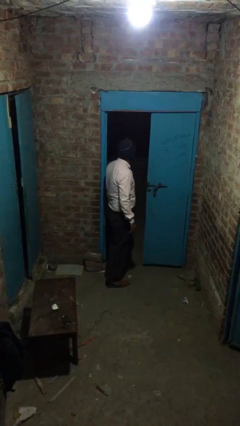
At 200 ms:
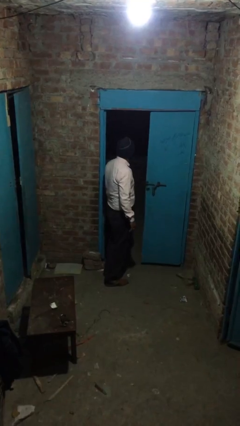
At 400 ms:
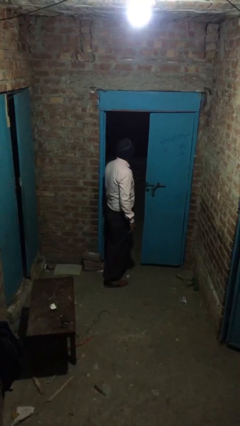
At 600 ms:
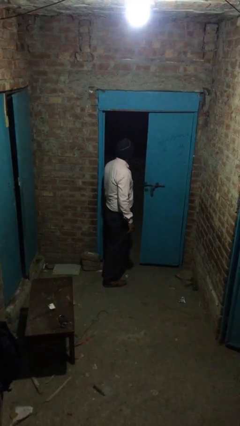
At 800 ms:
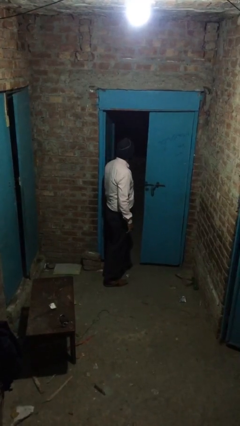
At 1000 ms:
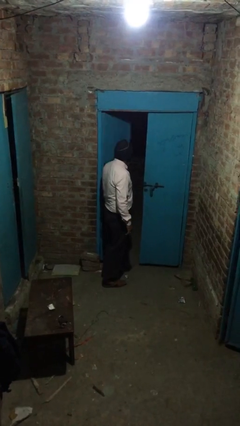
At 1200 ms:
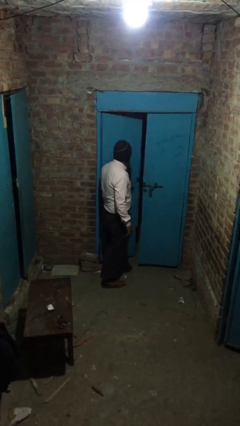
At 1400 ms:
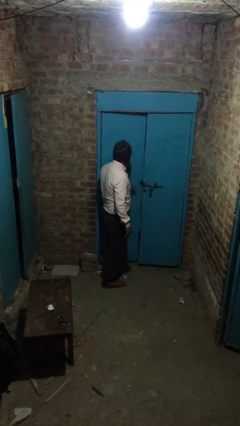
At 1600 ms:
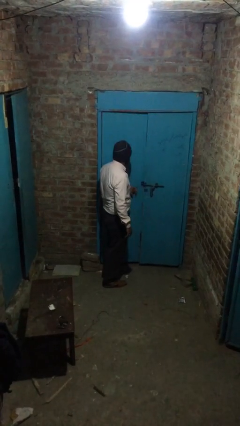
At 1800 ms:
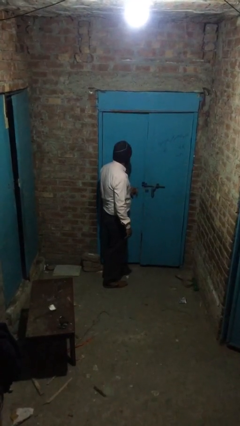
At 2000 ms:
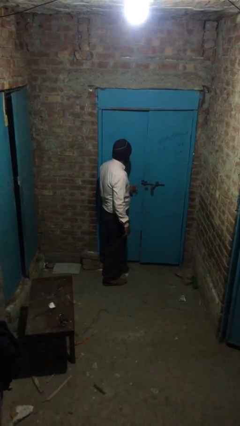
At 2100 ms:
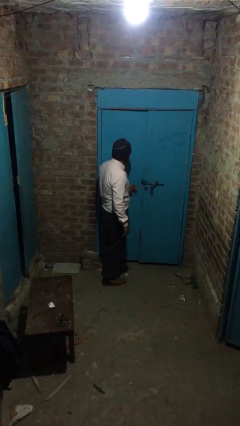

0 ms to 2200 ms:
person closes facility door

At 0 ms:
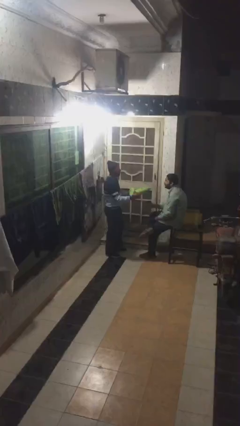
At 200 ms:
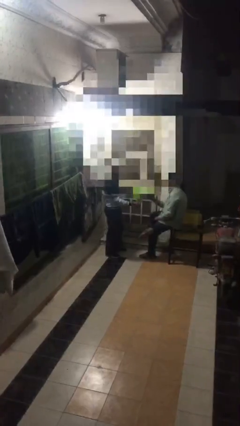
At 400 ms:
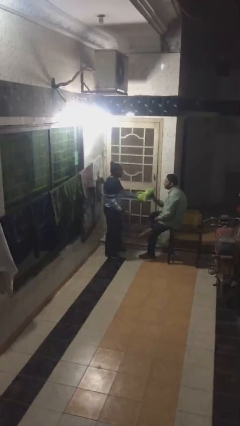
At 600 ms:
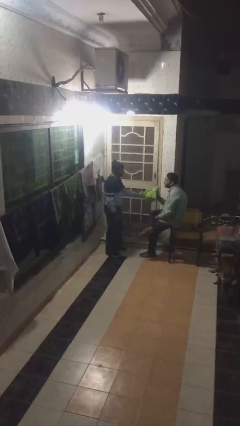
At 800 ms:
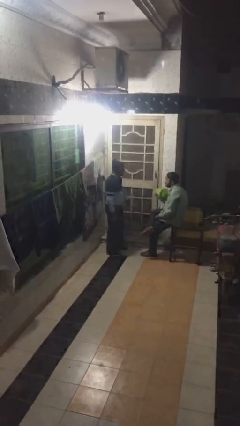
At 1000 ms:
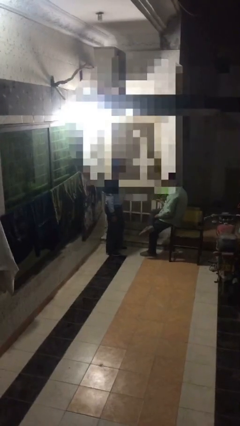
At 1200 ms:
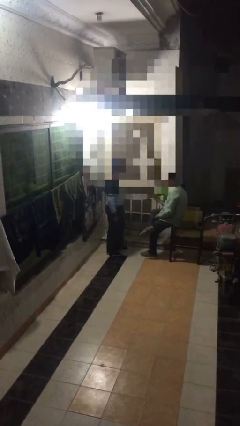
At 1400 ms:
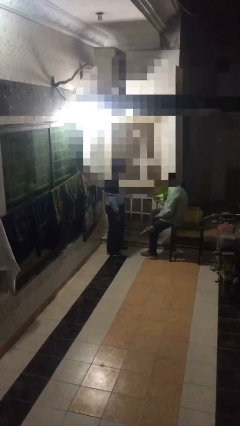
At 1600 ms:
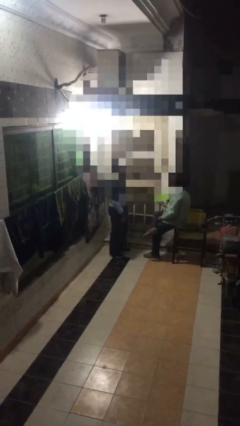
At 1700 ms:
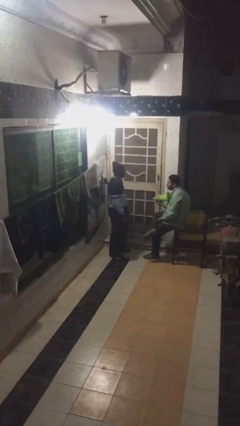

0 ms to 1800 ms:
person transfers object to person

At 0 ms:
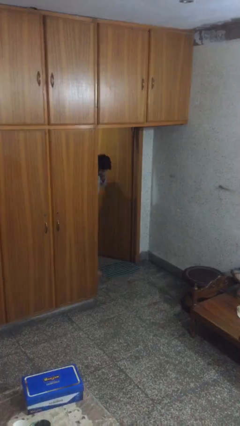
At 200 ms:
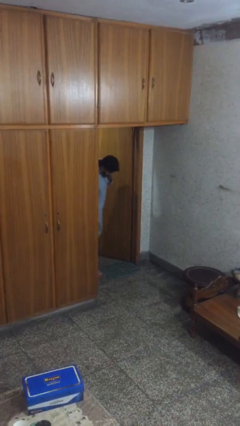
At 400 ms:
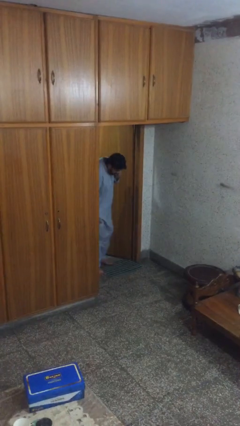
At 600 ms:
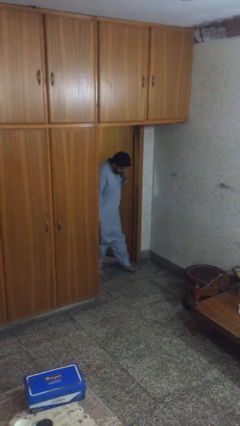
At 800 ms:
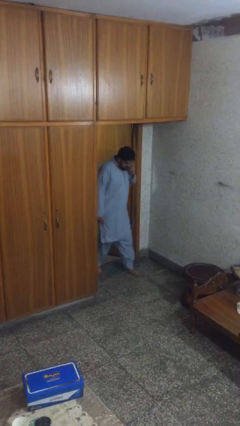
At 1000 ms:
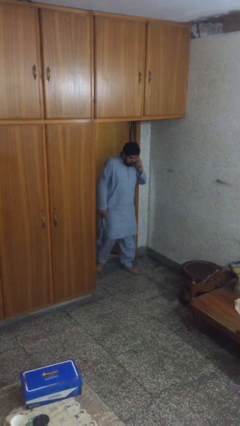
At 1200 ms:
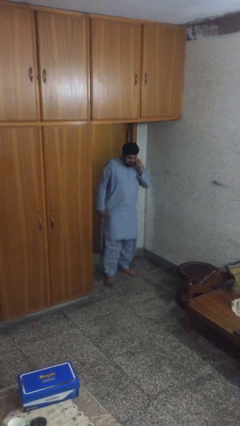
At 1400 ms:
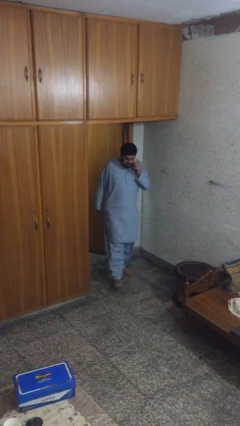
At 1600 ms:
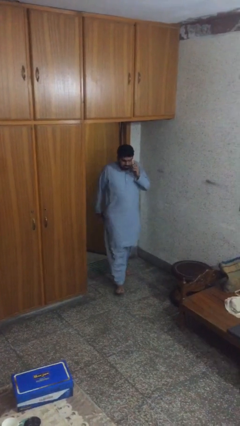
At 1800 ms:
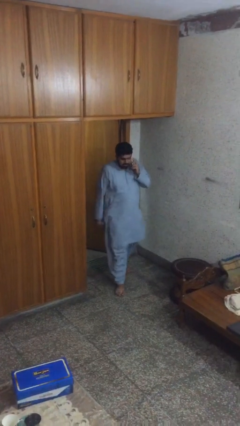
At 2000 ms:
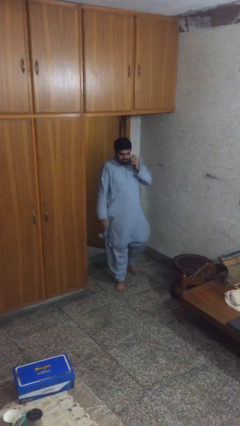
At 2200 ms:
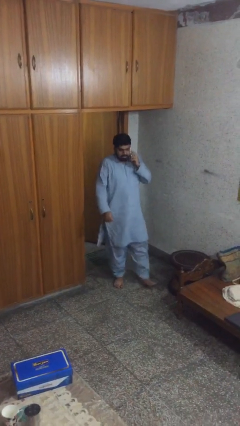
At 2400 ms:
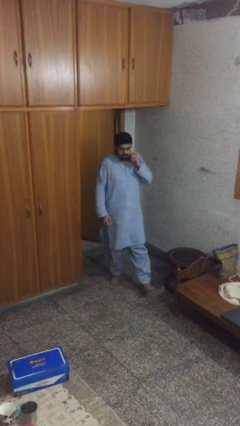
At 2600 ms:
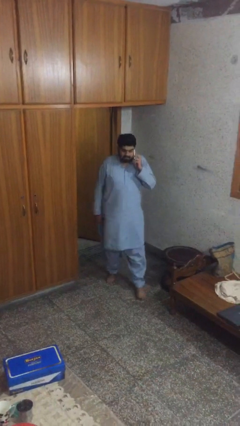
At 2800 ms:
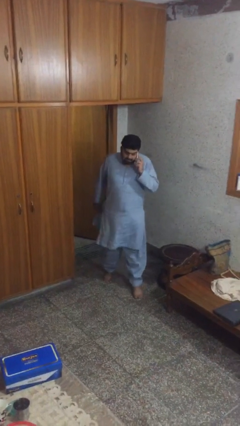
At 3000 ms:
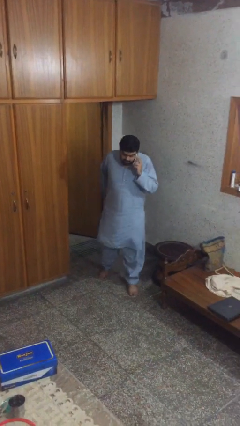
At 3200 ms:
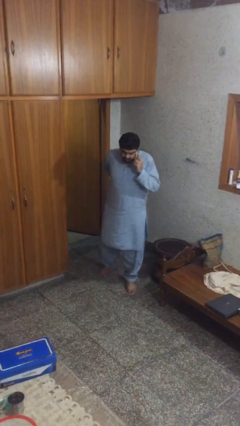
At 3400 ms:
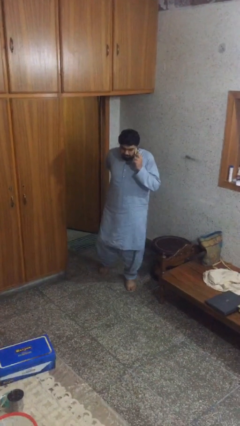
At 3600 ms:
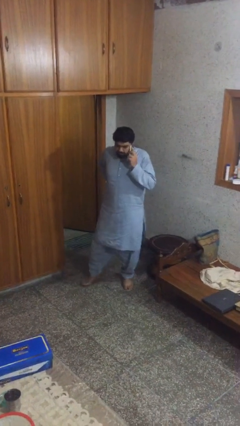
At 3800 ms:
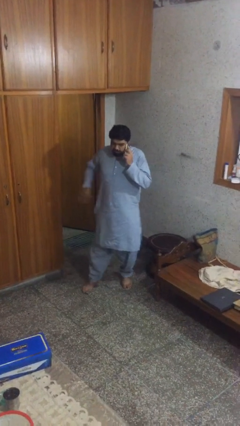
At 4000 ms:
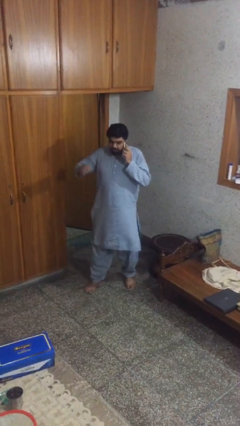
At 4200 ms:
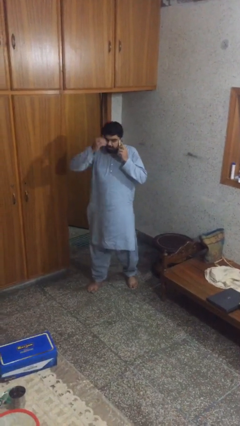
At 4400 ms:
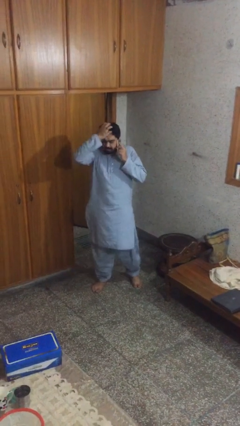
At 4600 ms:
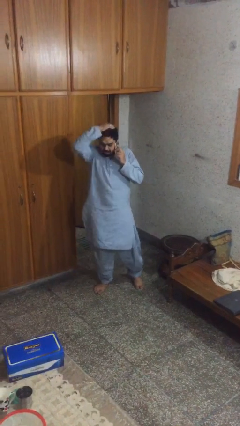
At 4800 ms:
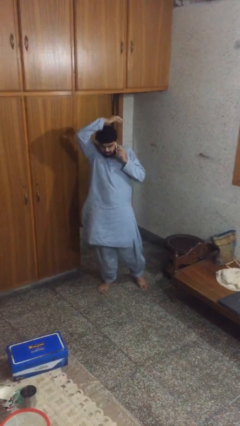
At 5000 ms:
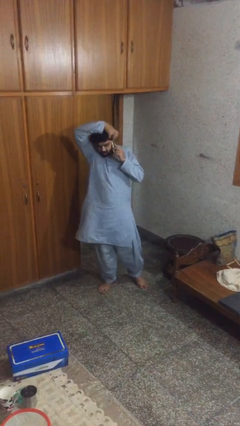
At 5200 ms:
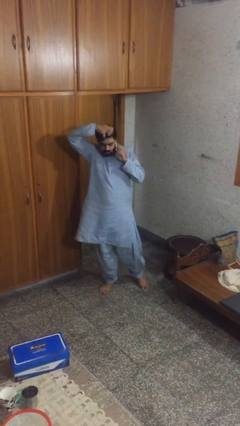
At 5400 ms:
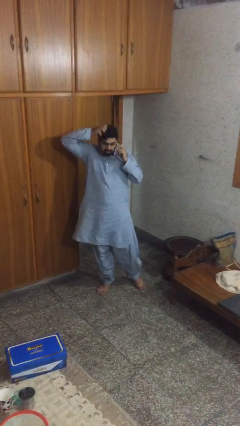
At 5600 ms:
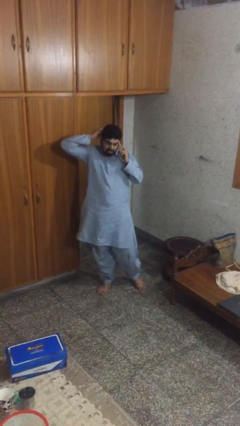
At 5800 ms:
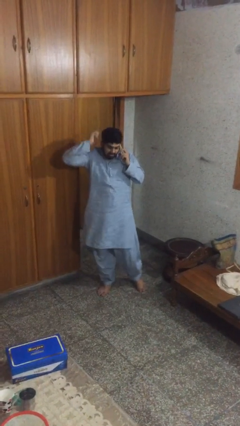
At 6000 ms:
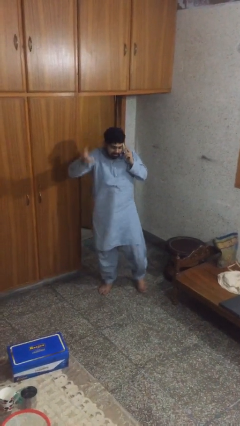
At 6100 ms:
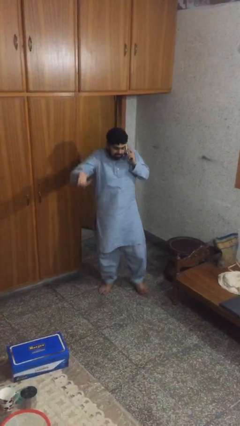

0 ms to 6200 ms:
person enters scene through structure

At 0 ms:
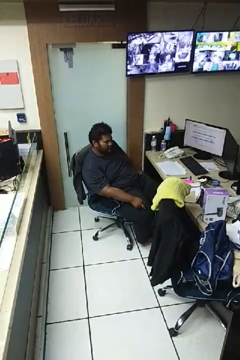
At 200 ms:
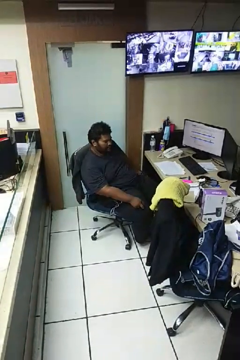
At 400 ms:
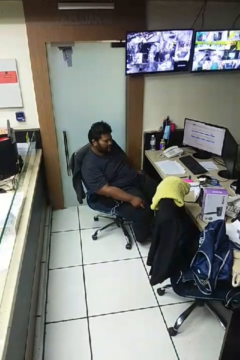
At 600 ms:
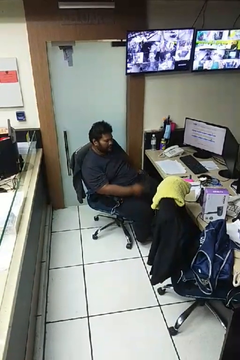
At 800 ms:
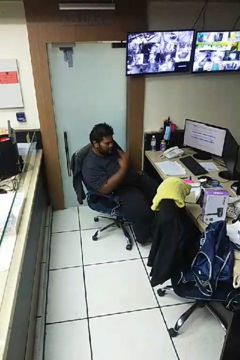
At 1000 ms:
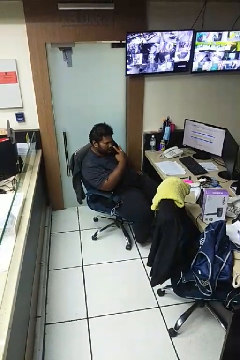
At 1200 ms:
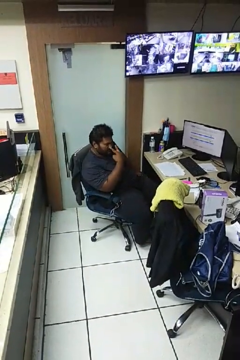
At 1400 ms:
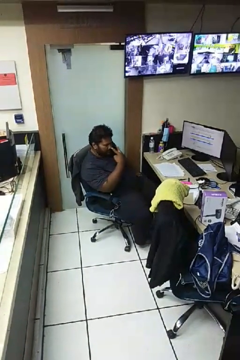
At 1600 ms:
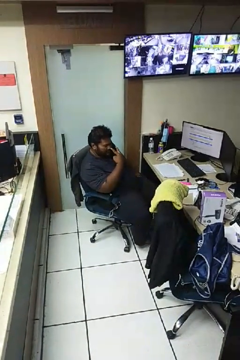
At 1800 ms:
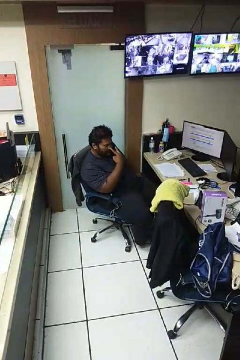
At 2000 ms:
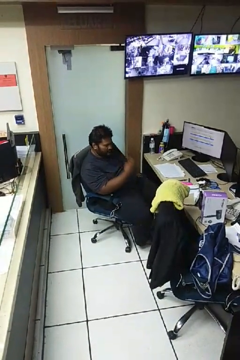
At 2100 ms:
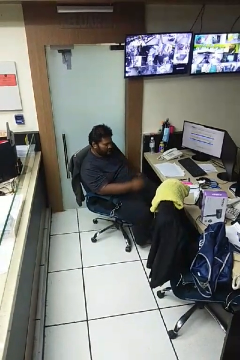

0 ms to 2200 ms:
person gestures watch closely

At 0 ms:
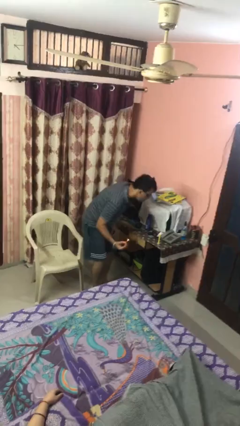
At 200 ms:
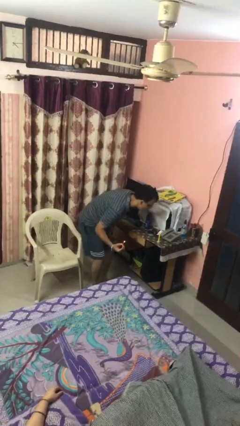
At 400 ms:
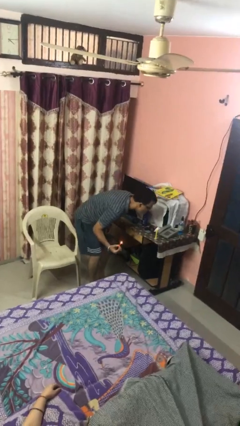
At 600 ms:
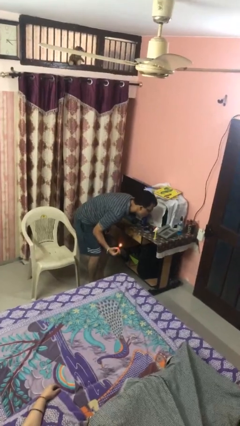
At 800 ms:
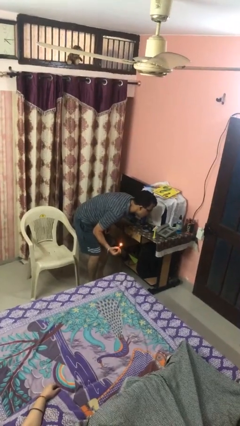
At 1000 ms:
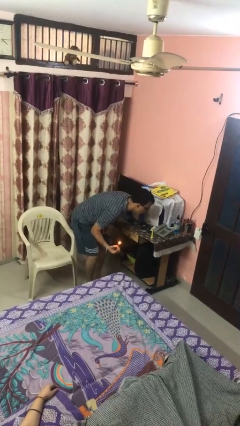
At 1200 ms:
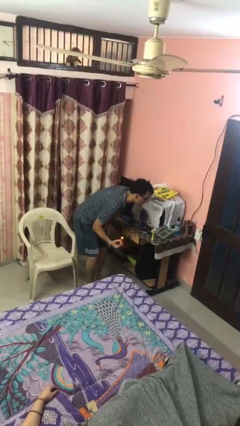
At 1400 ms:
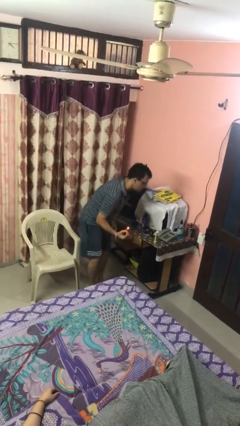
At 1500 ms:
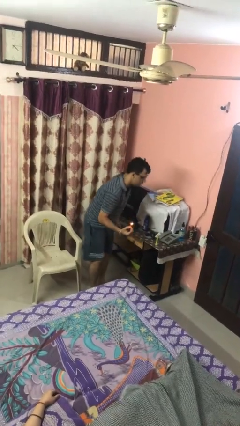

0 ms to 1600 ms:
person extinguishes candle

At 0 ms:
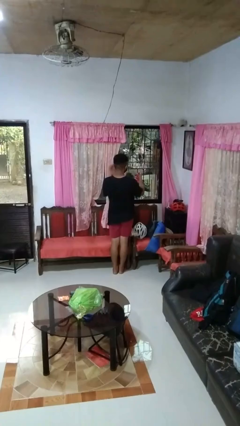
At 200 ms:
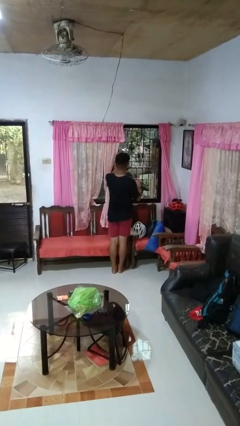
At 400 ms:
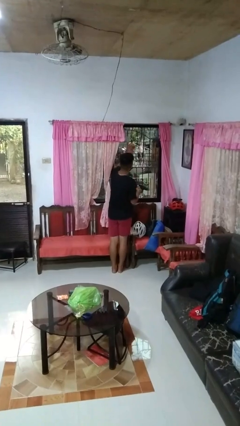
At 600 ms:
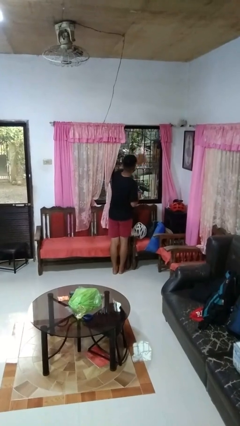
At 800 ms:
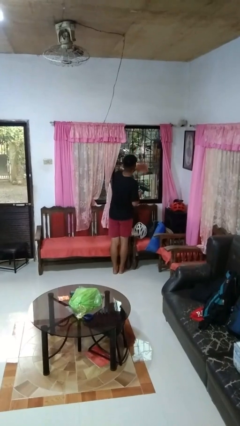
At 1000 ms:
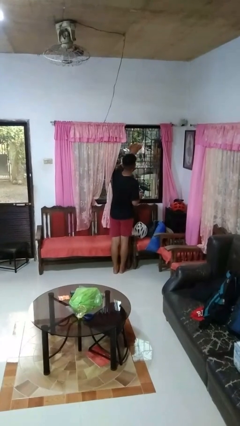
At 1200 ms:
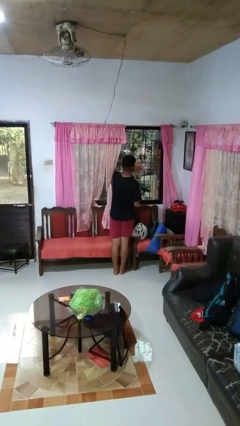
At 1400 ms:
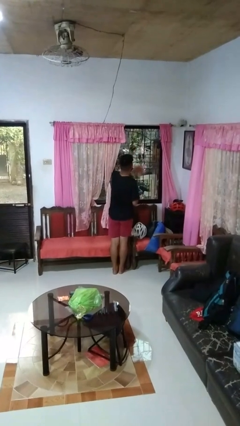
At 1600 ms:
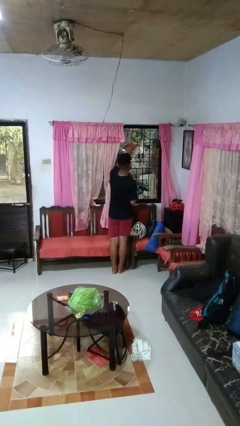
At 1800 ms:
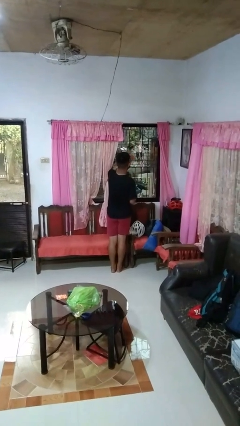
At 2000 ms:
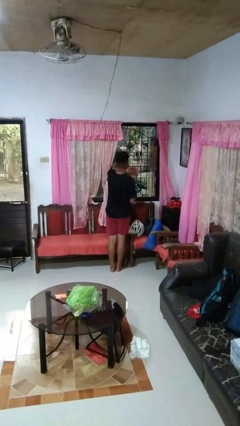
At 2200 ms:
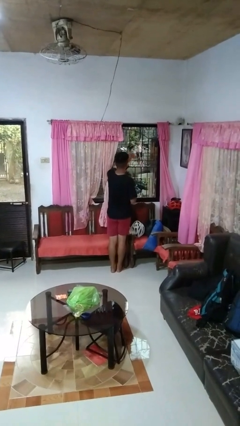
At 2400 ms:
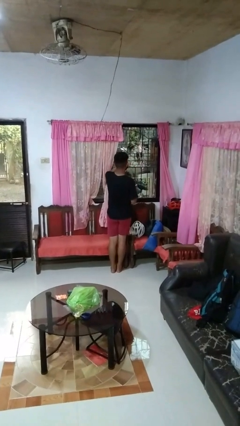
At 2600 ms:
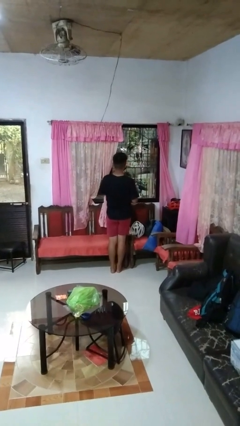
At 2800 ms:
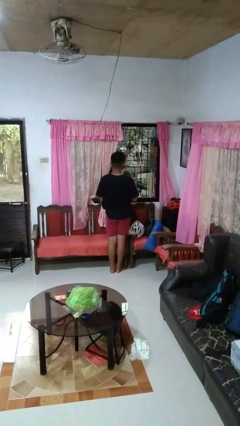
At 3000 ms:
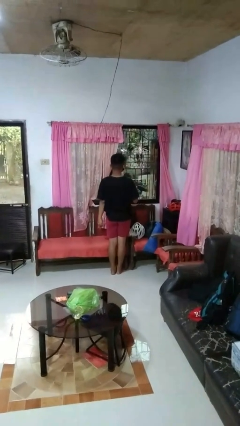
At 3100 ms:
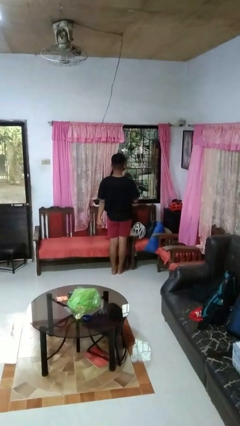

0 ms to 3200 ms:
person washes window

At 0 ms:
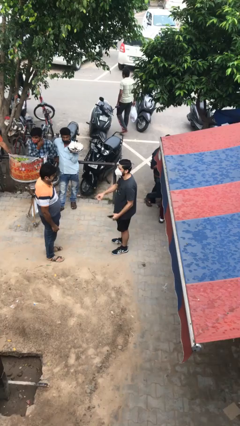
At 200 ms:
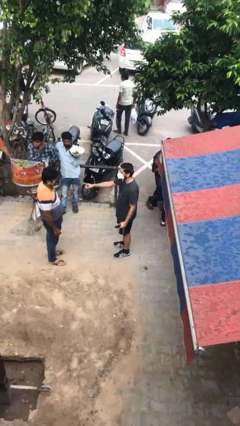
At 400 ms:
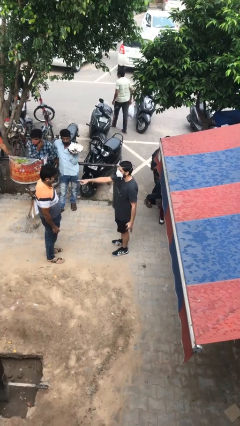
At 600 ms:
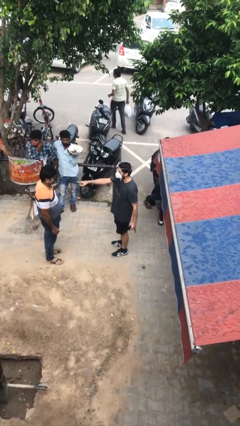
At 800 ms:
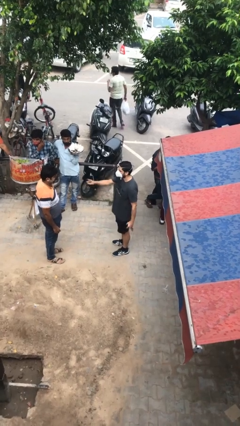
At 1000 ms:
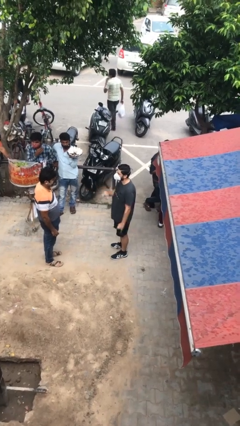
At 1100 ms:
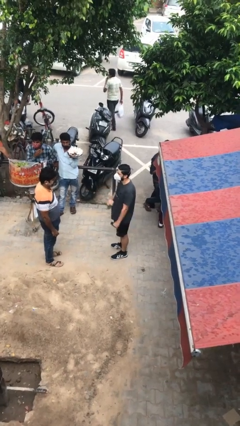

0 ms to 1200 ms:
person points at person
